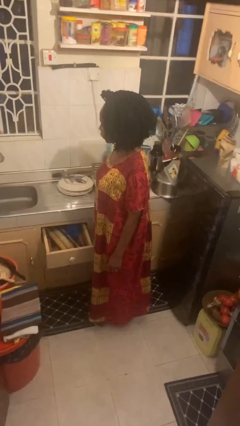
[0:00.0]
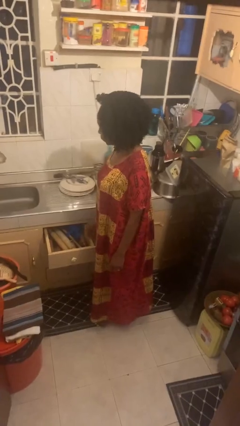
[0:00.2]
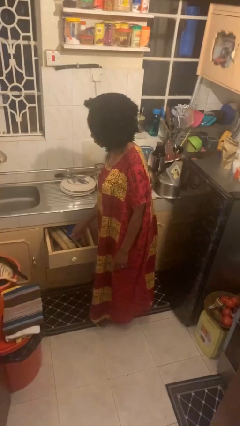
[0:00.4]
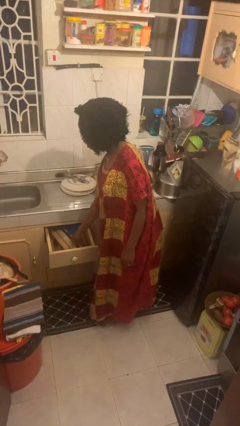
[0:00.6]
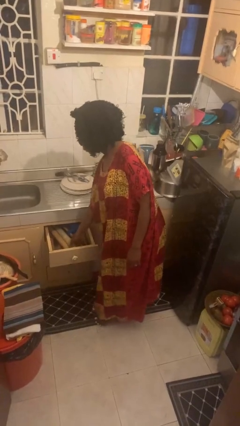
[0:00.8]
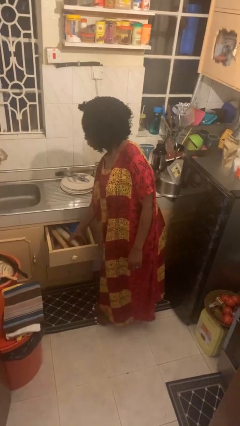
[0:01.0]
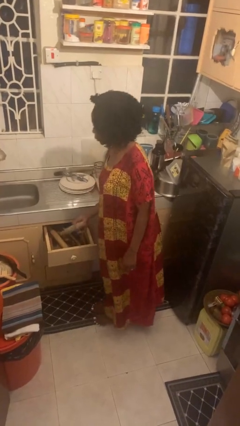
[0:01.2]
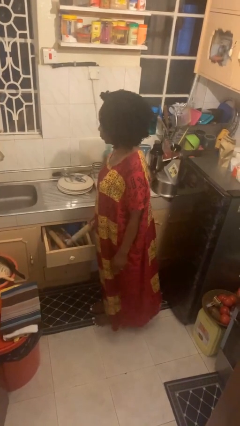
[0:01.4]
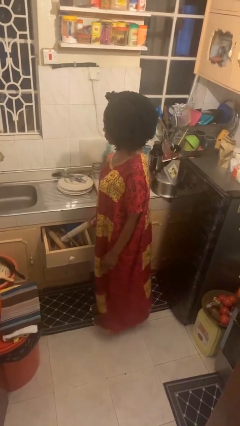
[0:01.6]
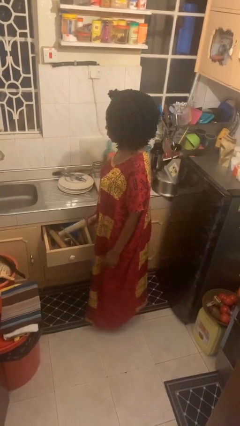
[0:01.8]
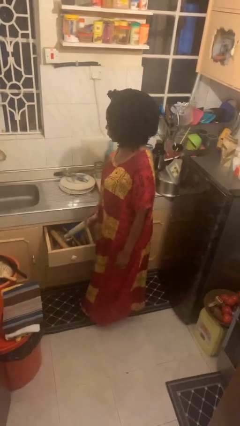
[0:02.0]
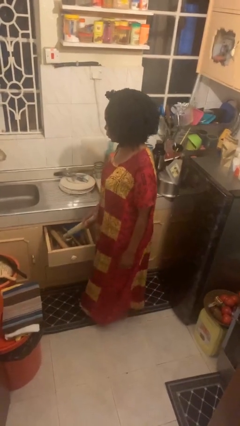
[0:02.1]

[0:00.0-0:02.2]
person takes object from kitchen drawer

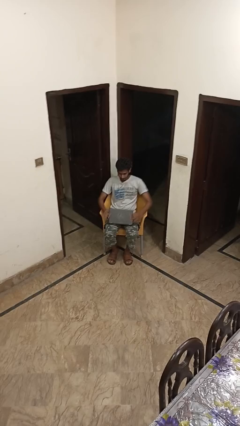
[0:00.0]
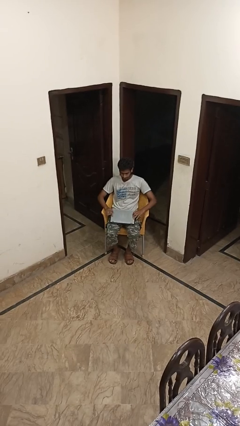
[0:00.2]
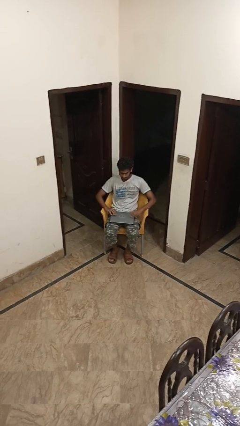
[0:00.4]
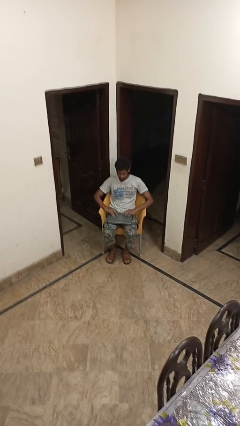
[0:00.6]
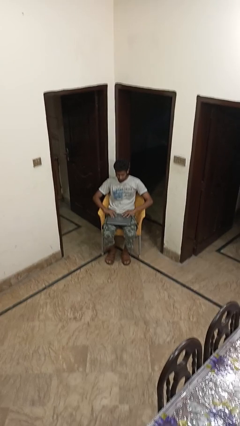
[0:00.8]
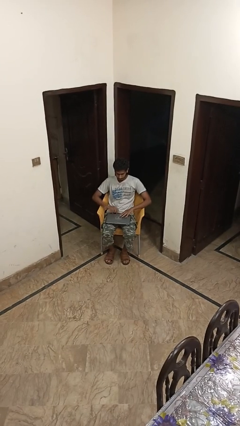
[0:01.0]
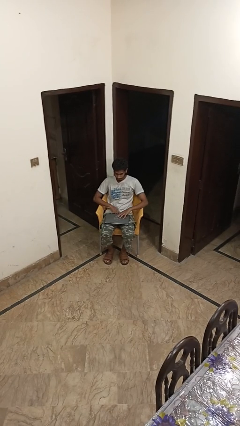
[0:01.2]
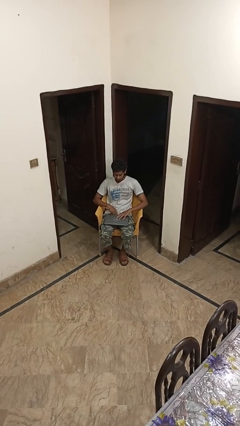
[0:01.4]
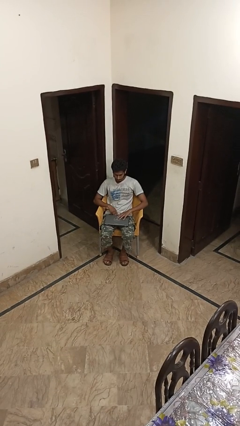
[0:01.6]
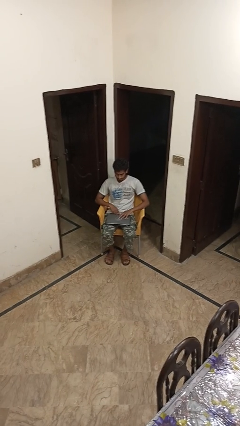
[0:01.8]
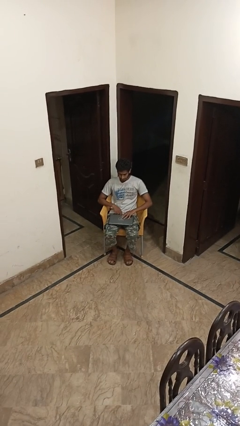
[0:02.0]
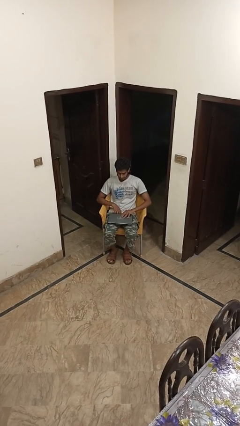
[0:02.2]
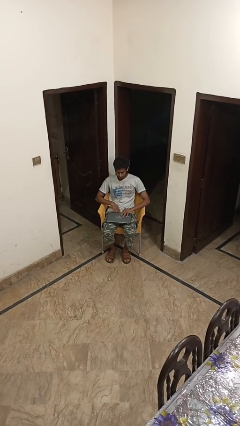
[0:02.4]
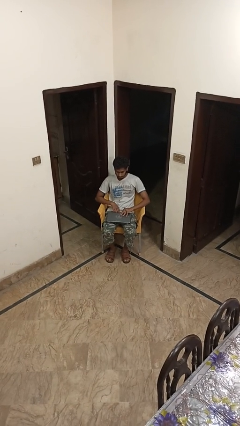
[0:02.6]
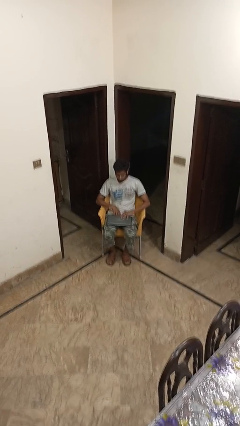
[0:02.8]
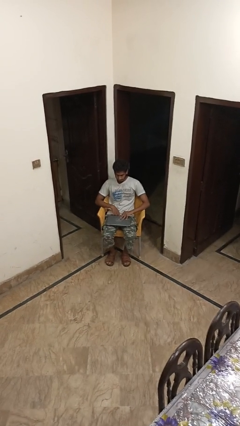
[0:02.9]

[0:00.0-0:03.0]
person closes laptop

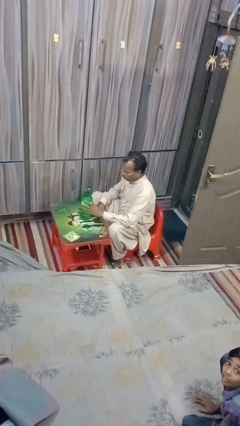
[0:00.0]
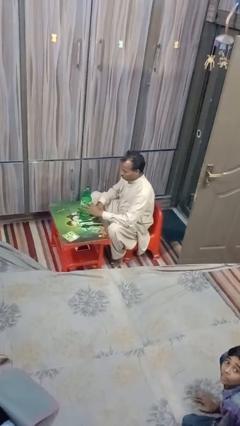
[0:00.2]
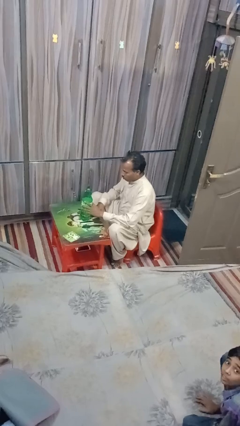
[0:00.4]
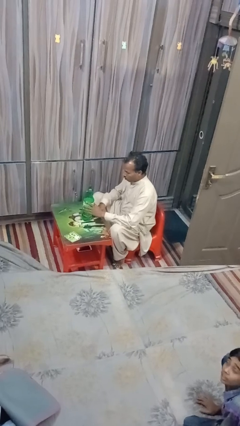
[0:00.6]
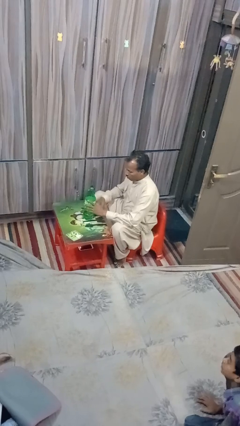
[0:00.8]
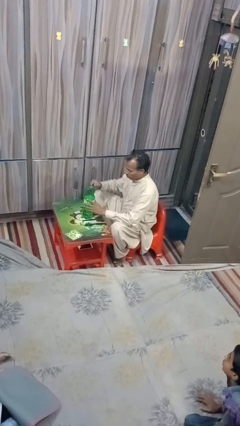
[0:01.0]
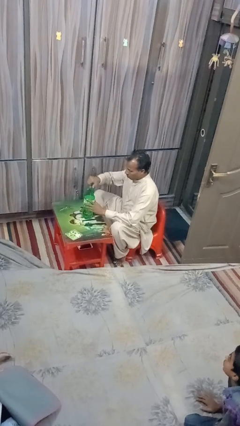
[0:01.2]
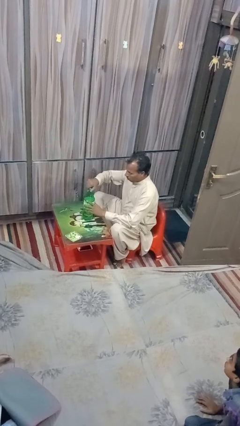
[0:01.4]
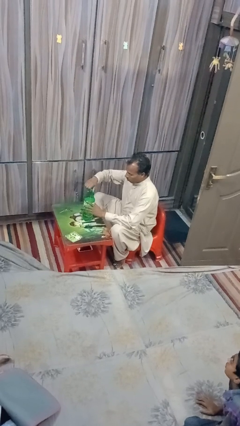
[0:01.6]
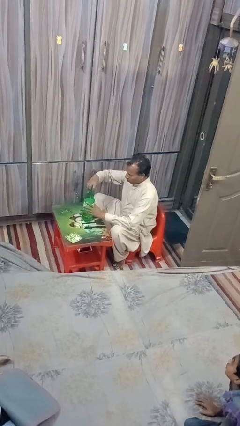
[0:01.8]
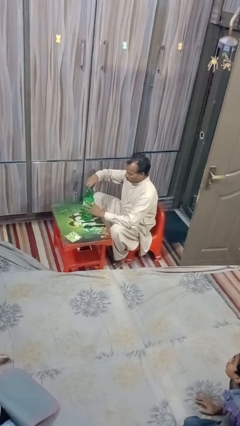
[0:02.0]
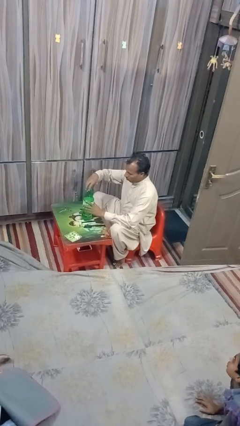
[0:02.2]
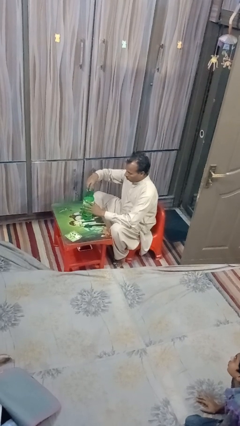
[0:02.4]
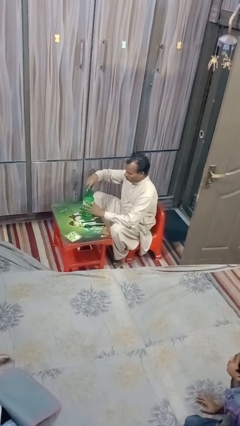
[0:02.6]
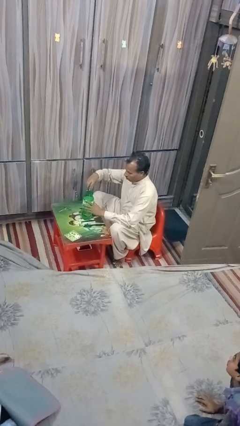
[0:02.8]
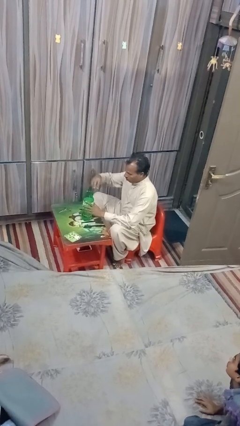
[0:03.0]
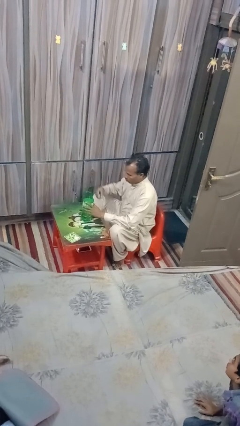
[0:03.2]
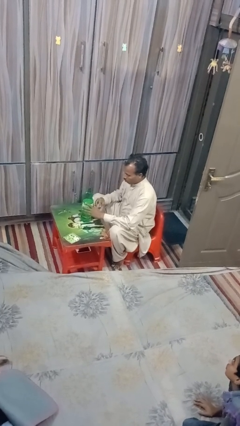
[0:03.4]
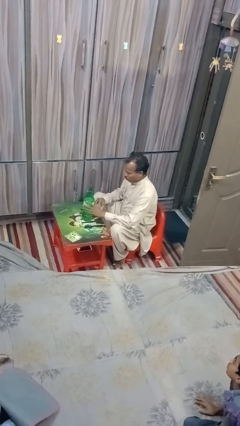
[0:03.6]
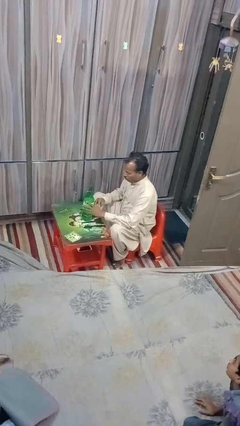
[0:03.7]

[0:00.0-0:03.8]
person unscrews lid from bottle

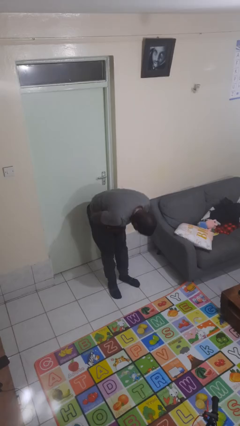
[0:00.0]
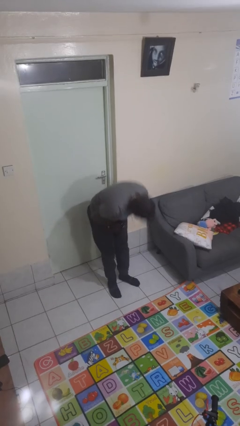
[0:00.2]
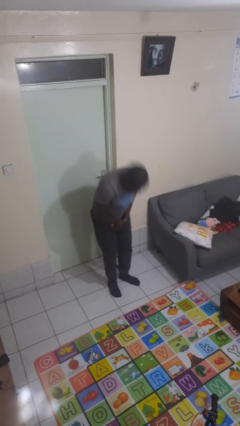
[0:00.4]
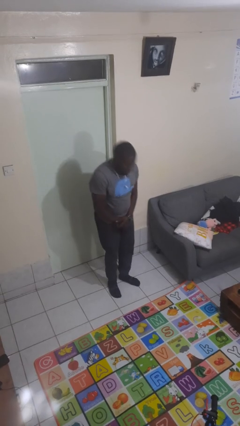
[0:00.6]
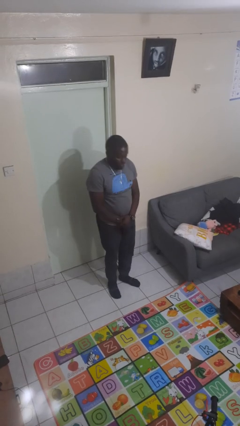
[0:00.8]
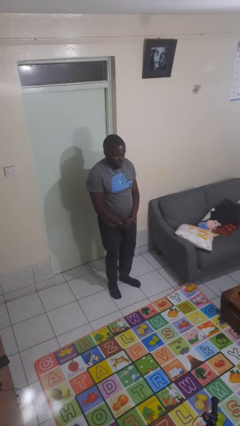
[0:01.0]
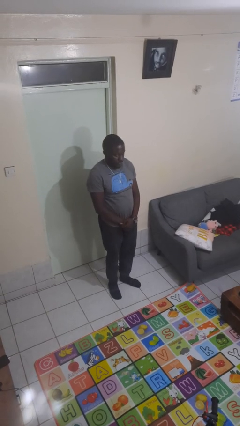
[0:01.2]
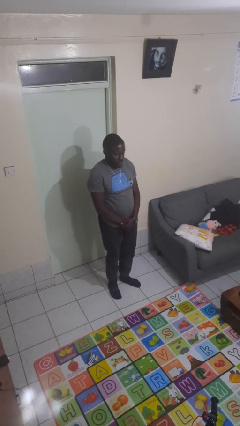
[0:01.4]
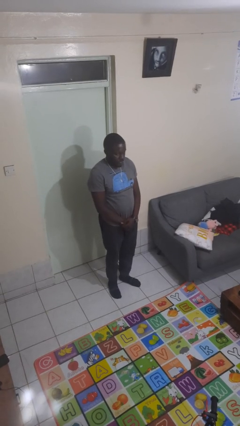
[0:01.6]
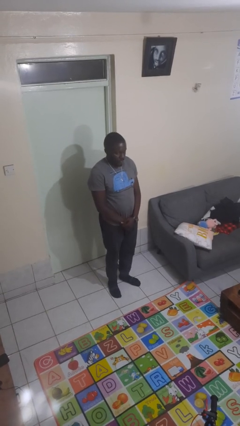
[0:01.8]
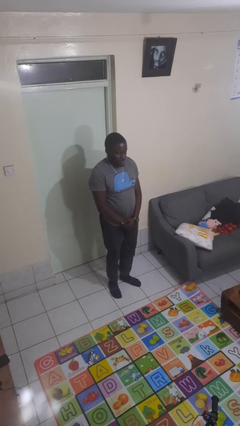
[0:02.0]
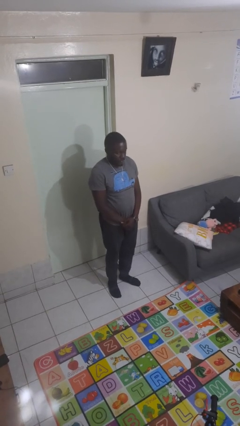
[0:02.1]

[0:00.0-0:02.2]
person bows

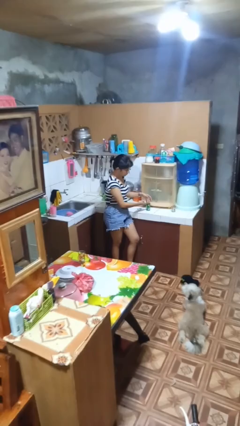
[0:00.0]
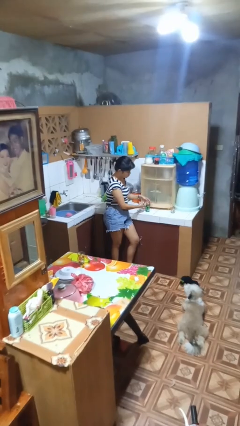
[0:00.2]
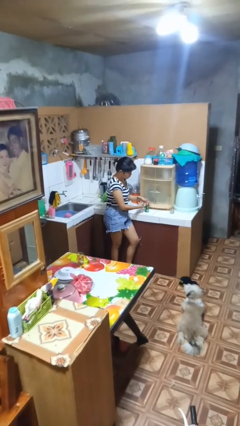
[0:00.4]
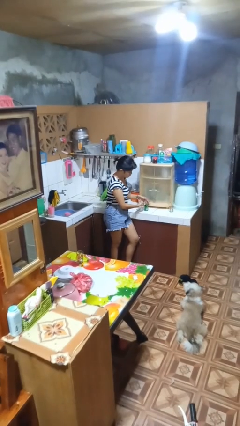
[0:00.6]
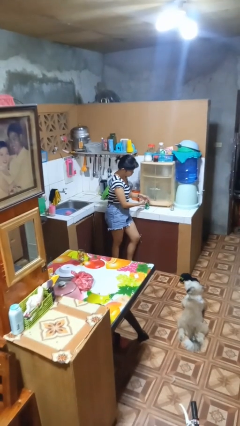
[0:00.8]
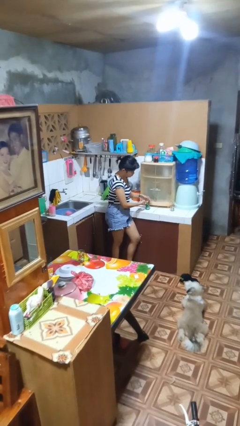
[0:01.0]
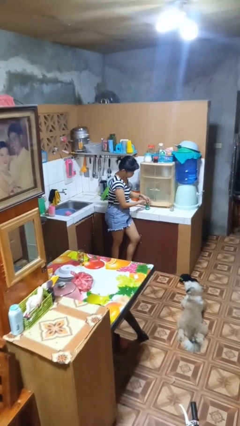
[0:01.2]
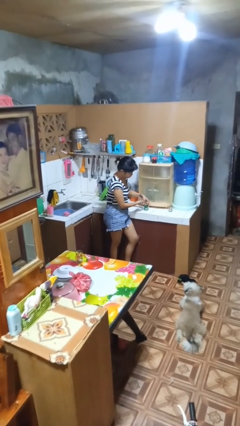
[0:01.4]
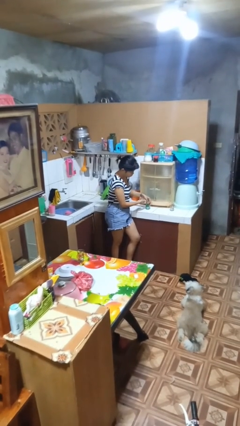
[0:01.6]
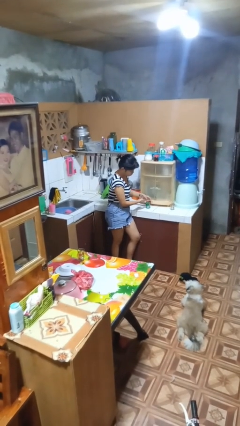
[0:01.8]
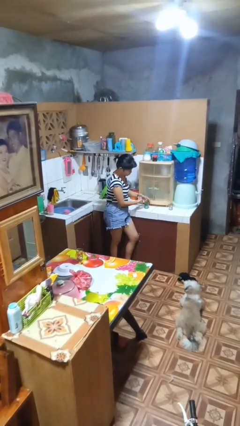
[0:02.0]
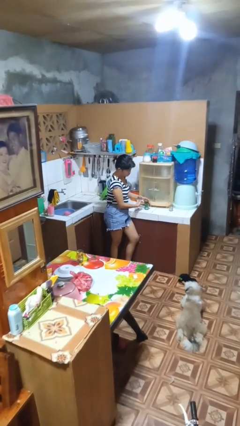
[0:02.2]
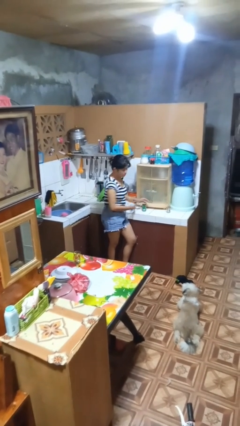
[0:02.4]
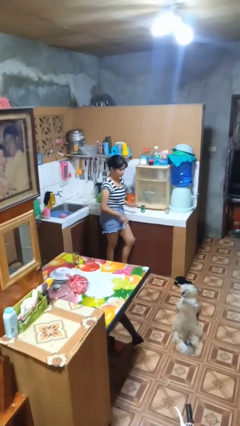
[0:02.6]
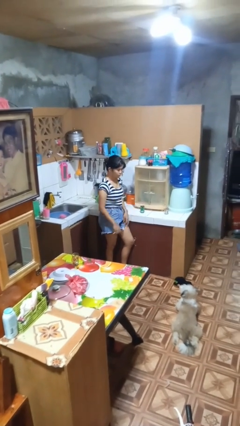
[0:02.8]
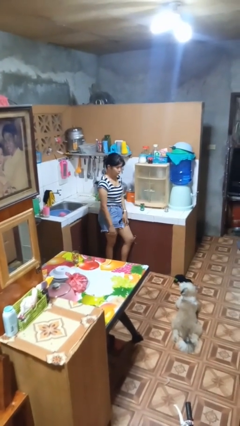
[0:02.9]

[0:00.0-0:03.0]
person opens can with can opener

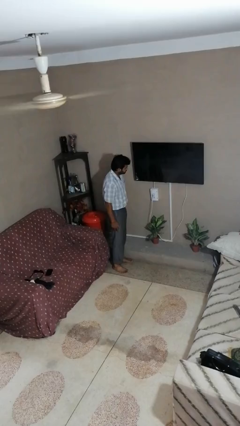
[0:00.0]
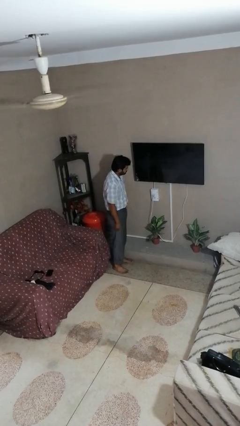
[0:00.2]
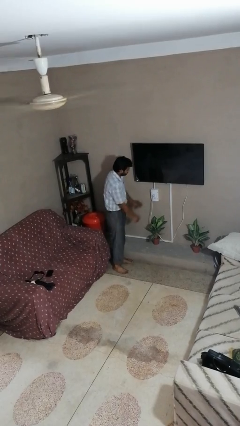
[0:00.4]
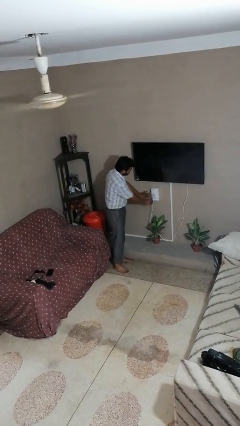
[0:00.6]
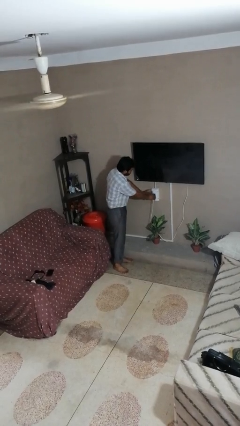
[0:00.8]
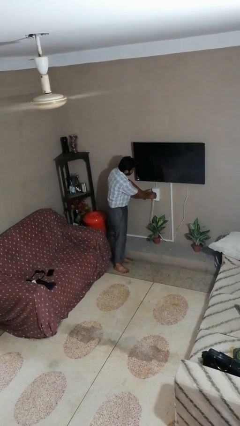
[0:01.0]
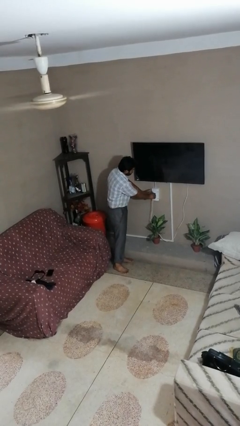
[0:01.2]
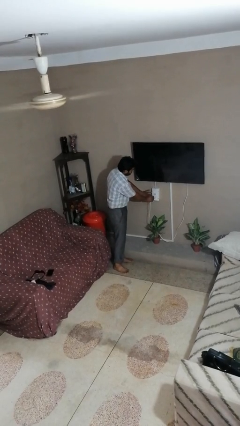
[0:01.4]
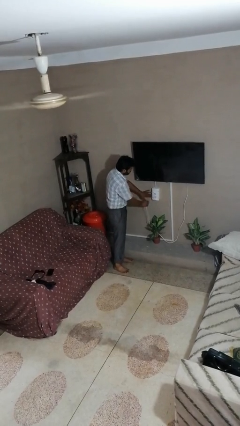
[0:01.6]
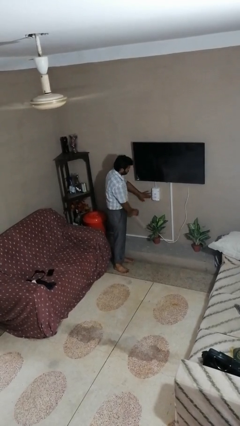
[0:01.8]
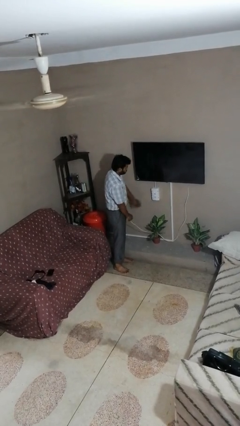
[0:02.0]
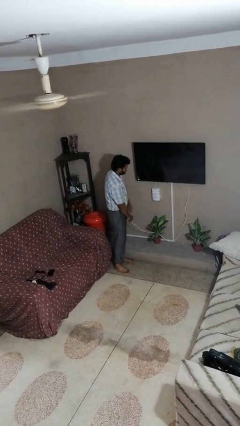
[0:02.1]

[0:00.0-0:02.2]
person unplugs from electrical socket

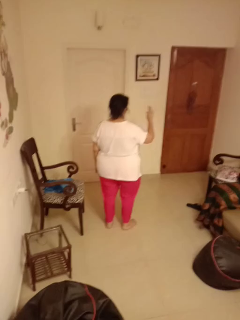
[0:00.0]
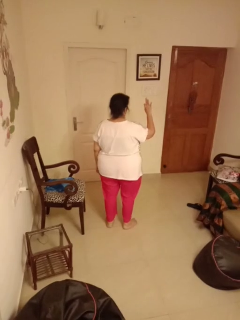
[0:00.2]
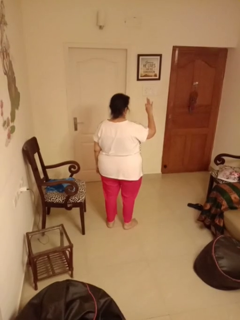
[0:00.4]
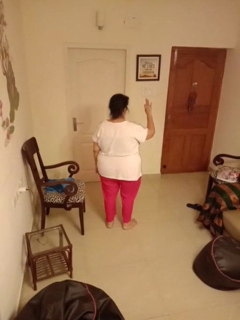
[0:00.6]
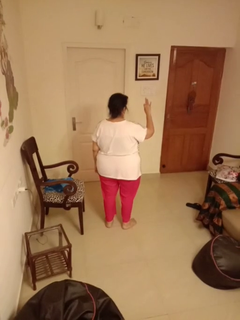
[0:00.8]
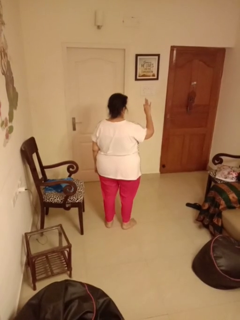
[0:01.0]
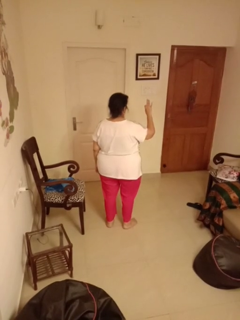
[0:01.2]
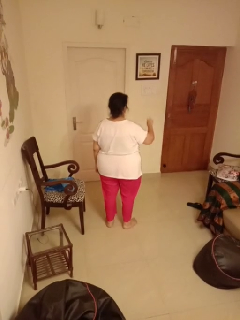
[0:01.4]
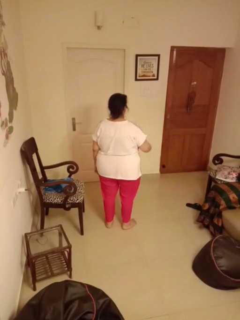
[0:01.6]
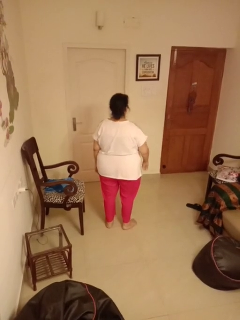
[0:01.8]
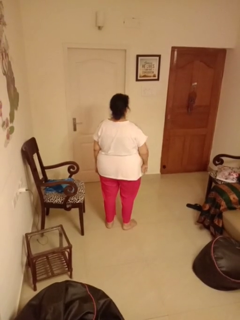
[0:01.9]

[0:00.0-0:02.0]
person gestures number three
